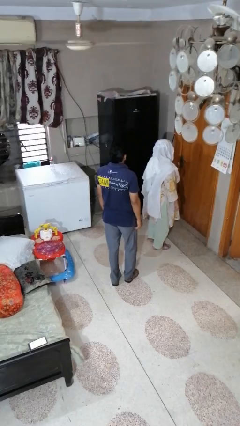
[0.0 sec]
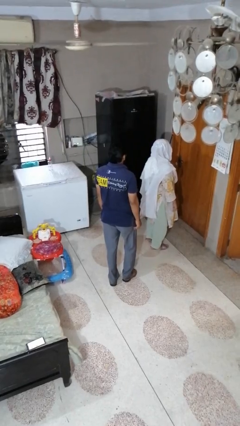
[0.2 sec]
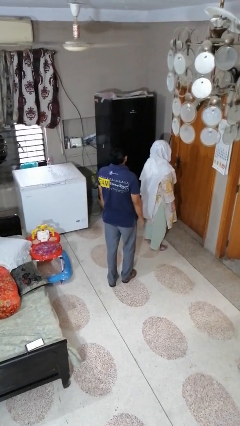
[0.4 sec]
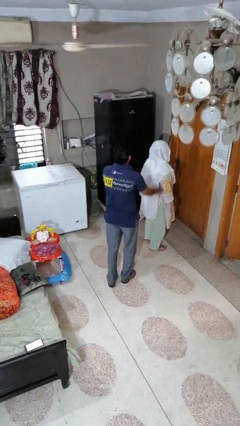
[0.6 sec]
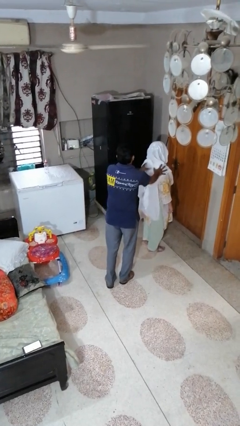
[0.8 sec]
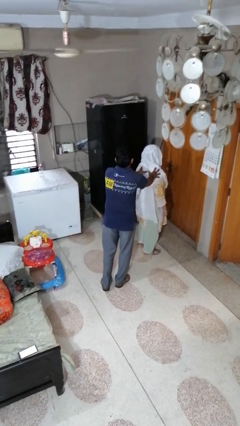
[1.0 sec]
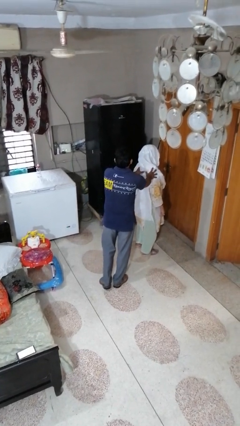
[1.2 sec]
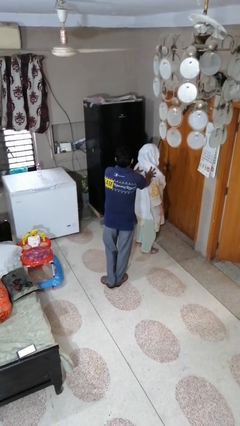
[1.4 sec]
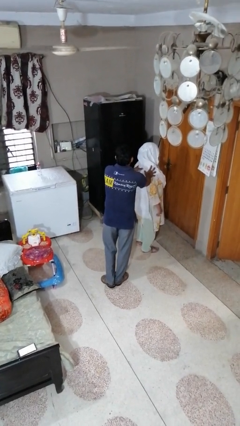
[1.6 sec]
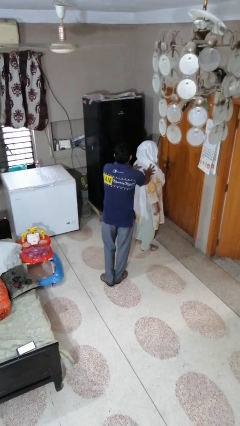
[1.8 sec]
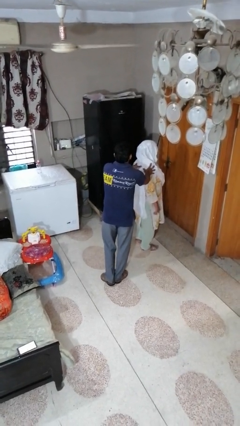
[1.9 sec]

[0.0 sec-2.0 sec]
person grabs person by shoulder

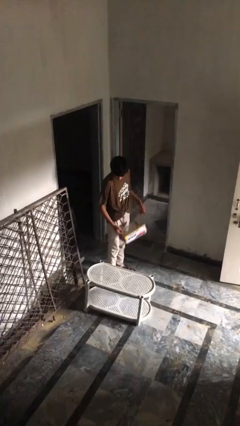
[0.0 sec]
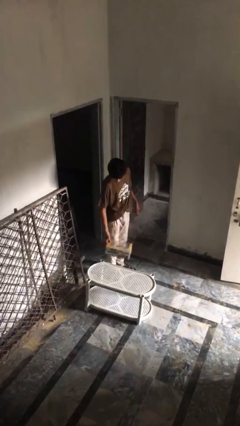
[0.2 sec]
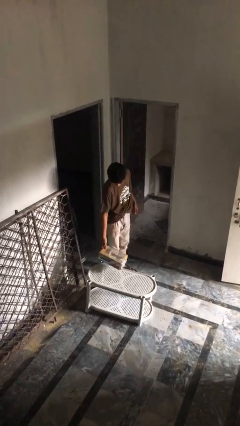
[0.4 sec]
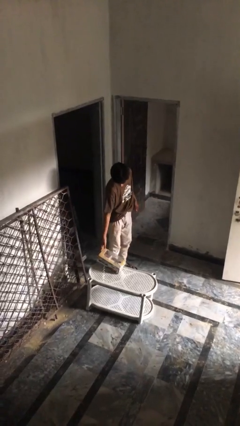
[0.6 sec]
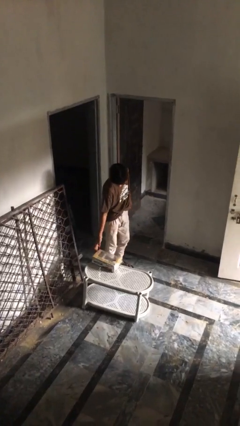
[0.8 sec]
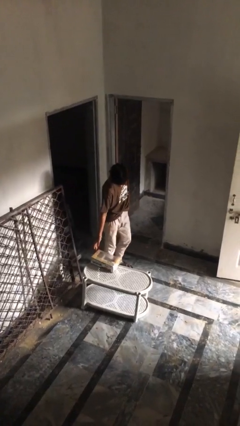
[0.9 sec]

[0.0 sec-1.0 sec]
person puts down object on table

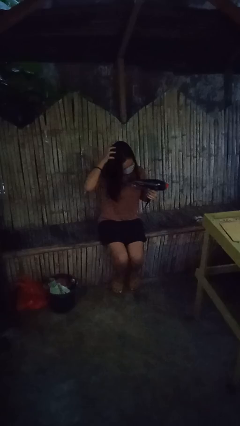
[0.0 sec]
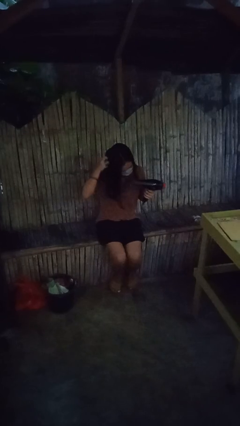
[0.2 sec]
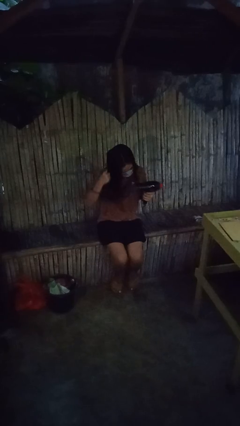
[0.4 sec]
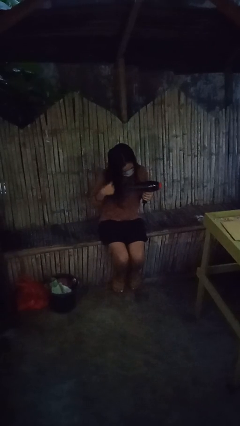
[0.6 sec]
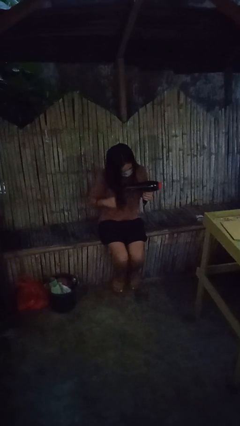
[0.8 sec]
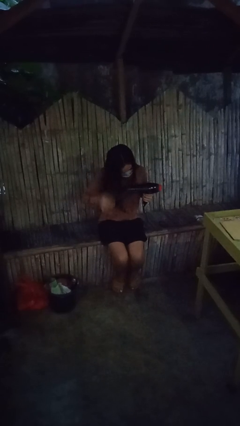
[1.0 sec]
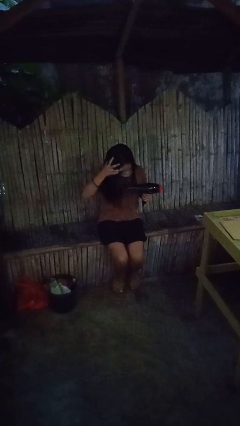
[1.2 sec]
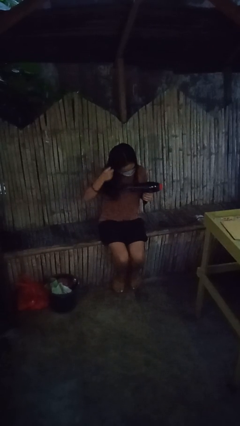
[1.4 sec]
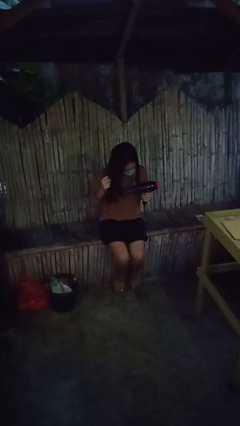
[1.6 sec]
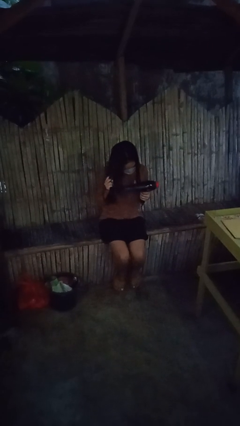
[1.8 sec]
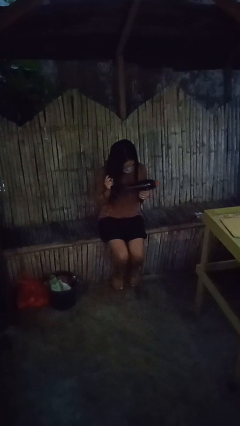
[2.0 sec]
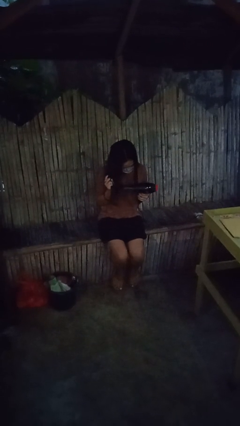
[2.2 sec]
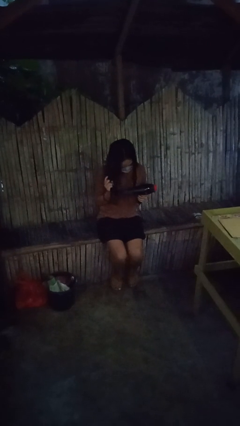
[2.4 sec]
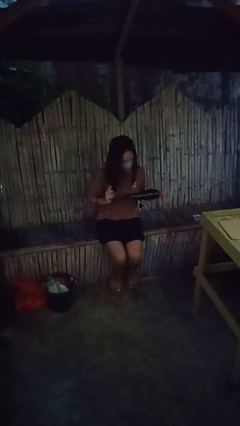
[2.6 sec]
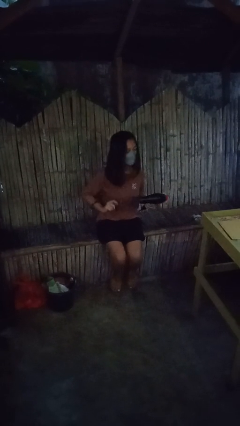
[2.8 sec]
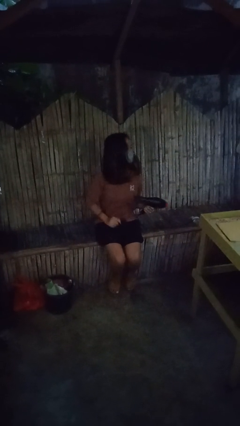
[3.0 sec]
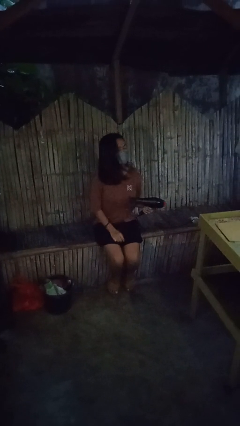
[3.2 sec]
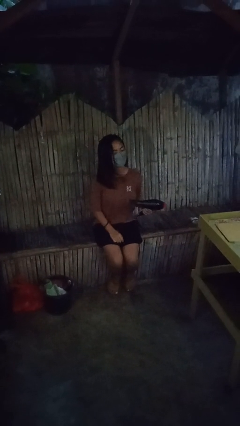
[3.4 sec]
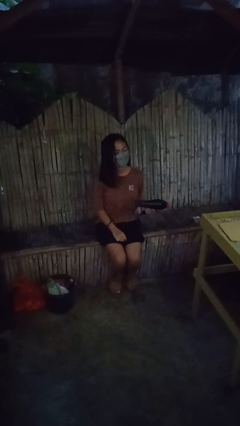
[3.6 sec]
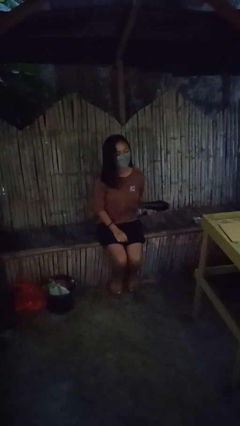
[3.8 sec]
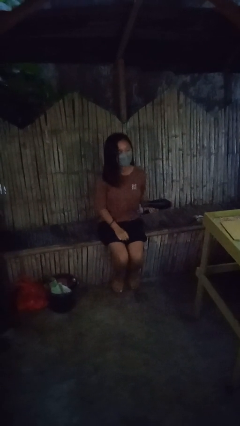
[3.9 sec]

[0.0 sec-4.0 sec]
person dries hair with hairdryer

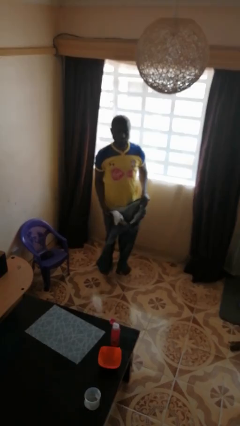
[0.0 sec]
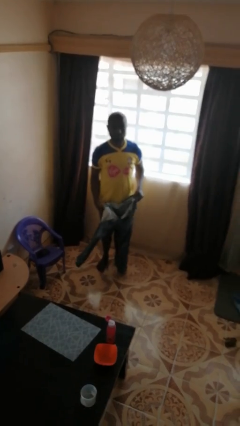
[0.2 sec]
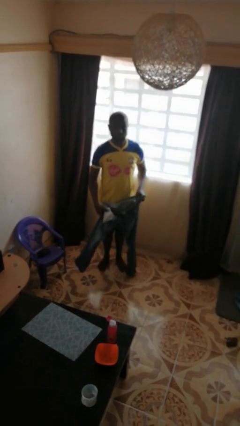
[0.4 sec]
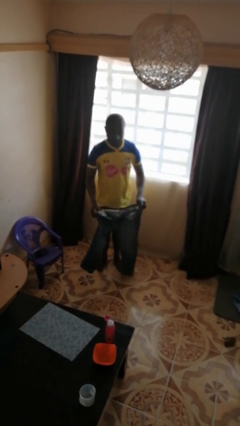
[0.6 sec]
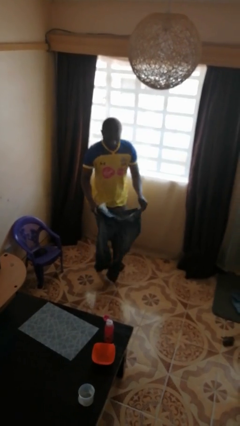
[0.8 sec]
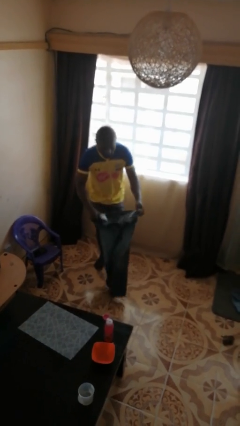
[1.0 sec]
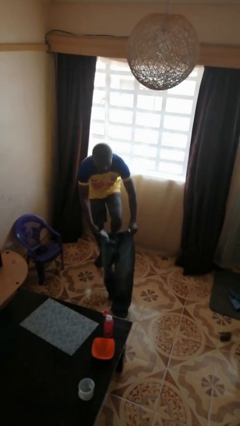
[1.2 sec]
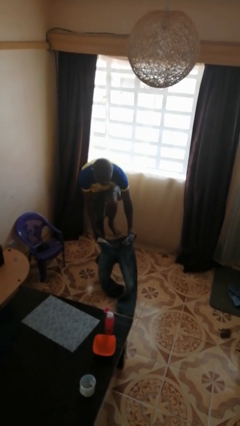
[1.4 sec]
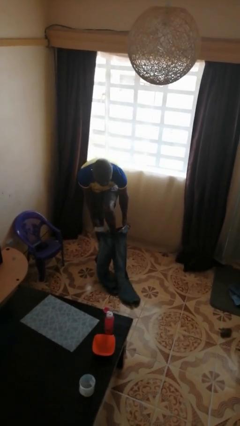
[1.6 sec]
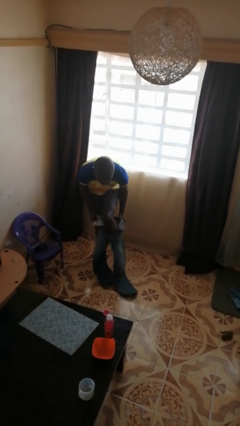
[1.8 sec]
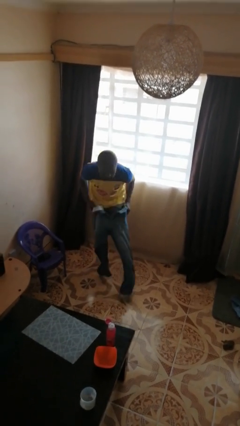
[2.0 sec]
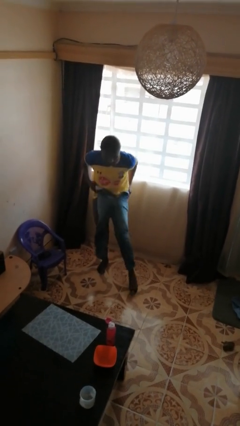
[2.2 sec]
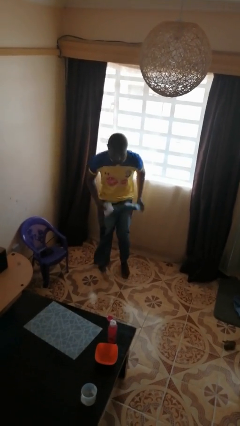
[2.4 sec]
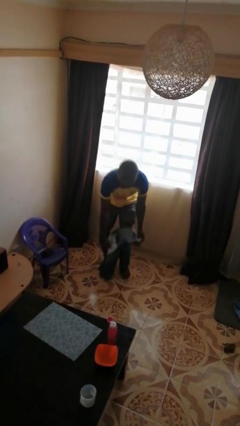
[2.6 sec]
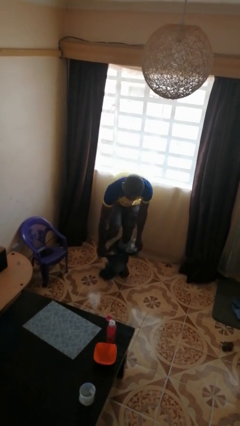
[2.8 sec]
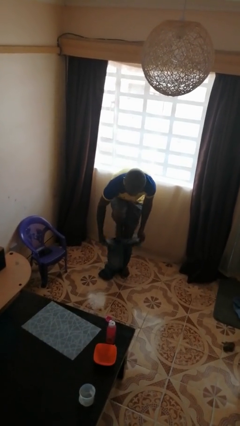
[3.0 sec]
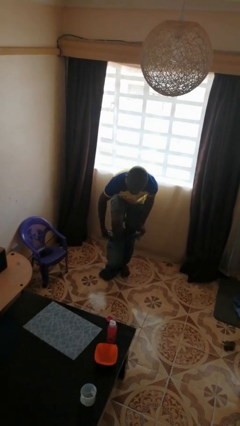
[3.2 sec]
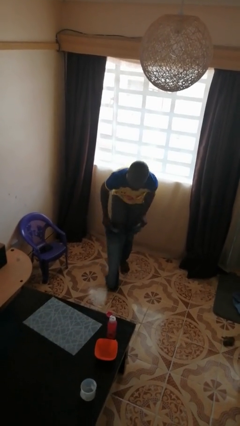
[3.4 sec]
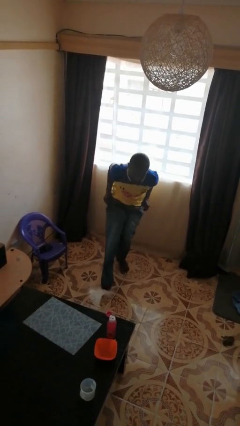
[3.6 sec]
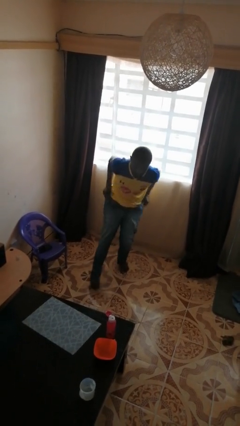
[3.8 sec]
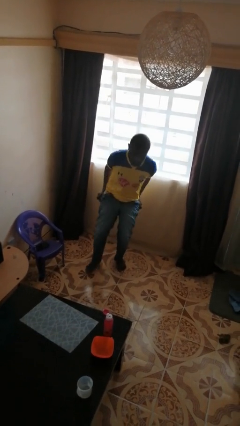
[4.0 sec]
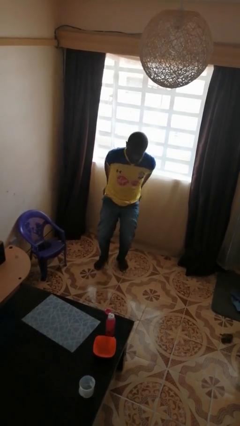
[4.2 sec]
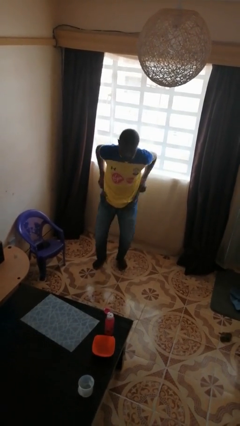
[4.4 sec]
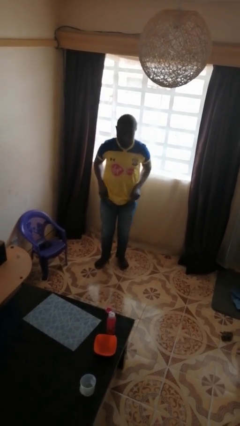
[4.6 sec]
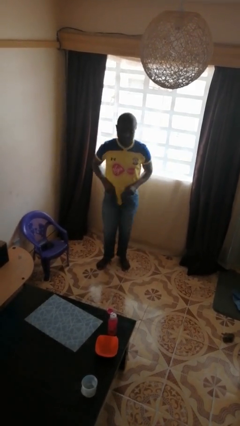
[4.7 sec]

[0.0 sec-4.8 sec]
person puts on pants

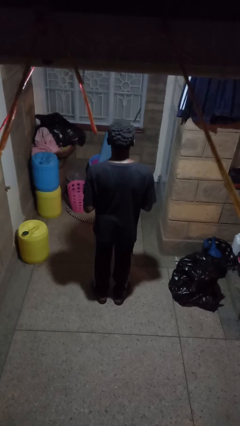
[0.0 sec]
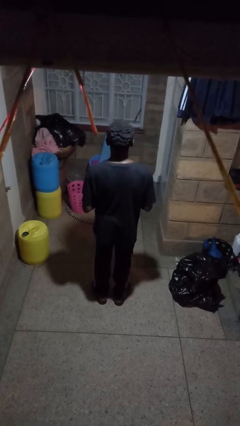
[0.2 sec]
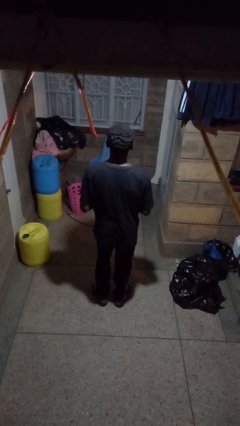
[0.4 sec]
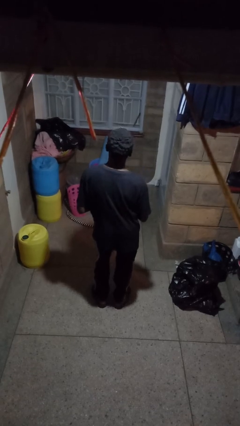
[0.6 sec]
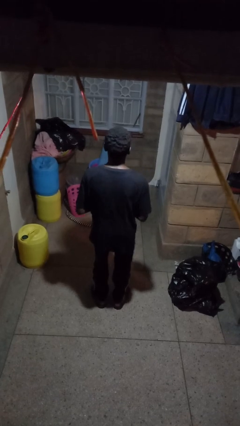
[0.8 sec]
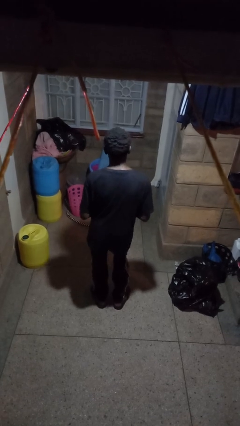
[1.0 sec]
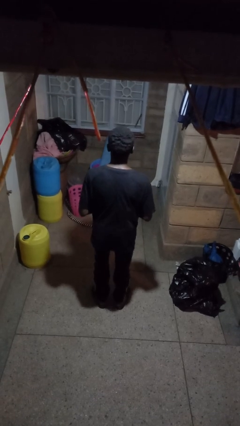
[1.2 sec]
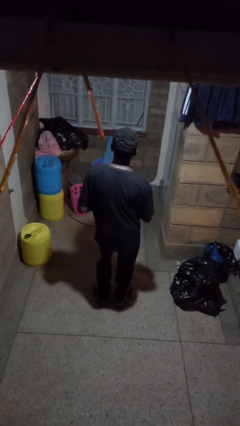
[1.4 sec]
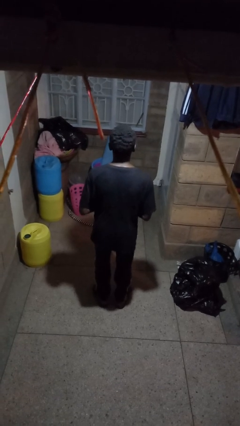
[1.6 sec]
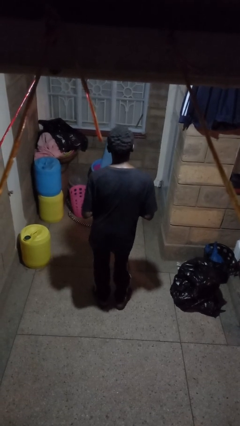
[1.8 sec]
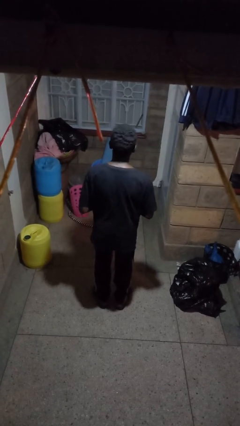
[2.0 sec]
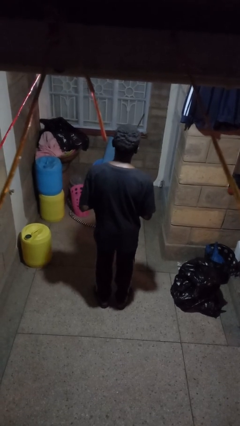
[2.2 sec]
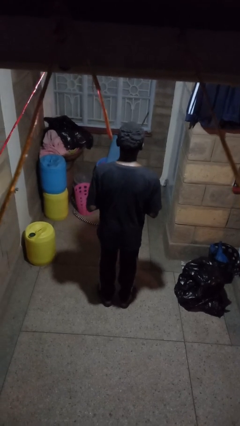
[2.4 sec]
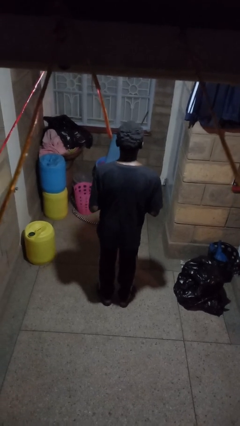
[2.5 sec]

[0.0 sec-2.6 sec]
person wiggles hips

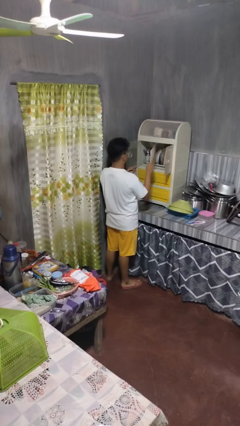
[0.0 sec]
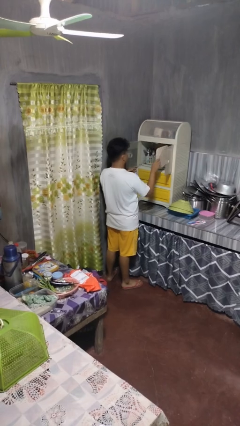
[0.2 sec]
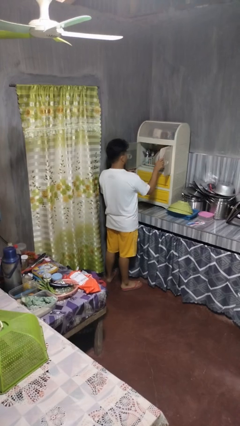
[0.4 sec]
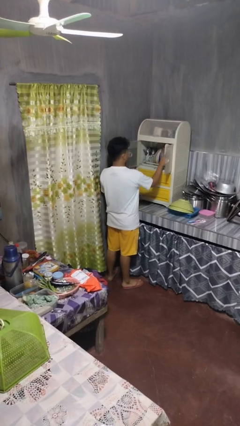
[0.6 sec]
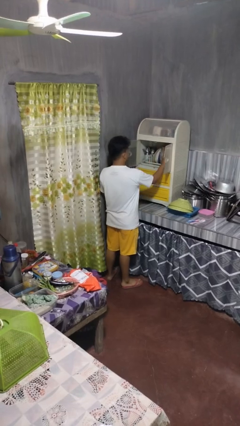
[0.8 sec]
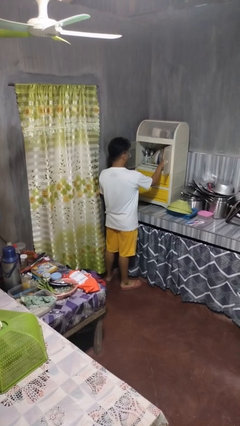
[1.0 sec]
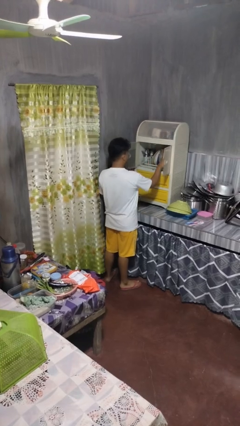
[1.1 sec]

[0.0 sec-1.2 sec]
person puts object in cabinet

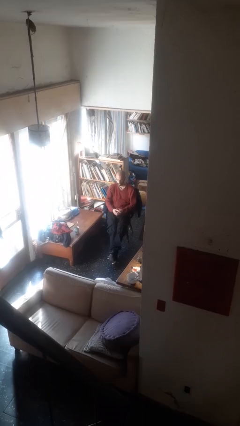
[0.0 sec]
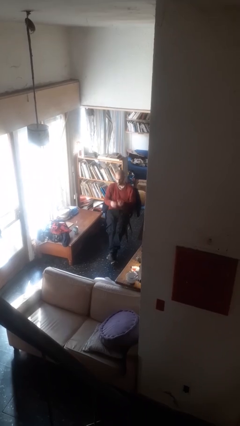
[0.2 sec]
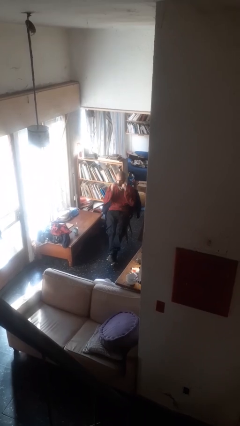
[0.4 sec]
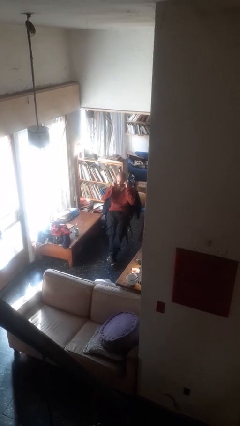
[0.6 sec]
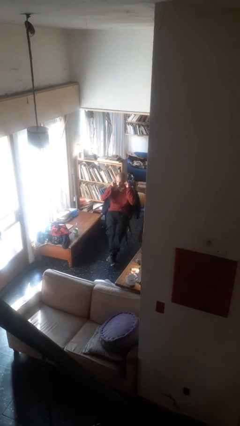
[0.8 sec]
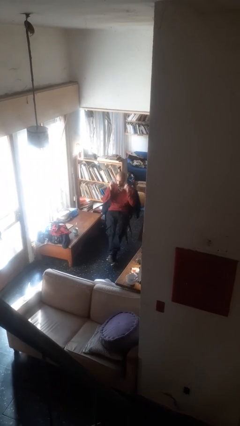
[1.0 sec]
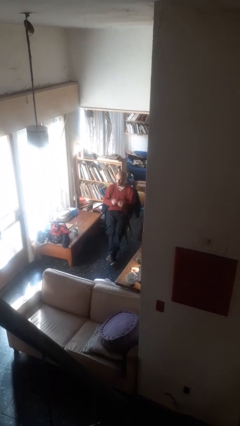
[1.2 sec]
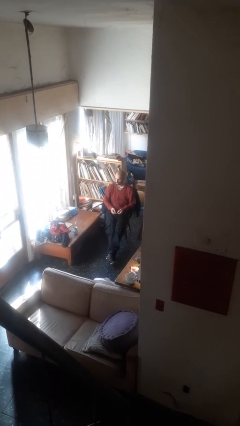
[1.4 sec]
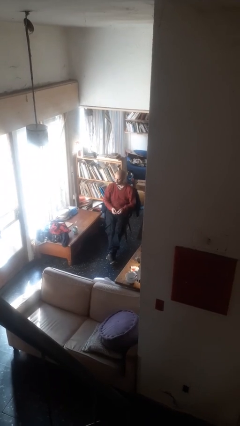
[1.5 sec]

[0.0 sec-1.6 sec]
person takes off headphones
